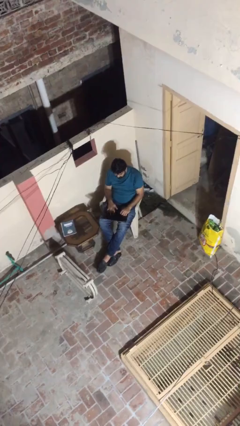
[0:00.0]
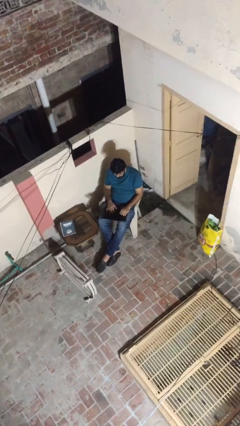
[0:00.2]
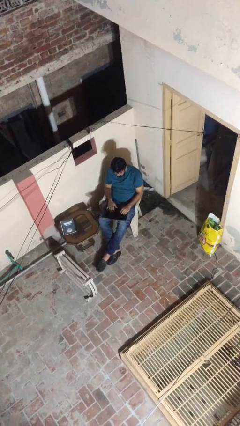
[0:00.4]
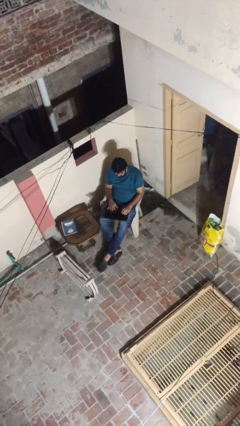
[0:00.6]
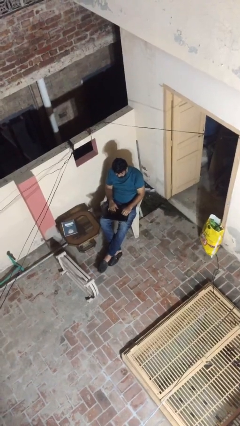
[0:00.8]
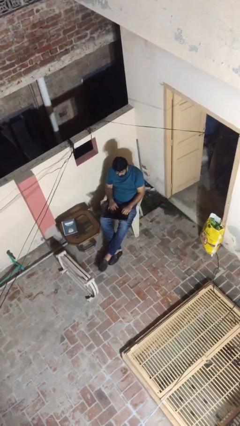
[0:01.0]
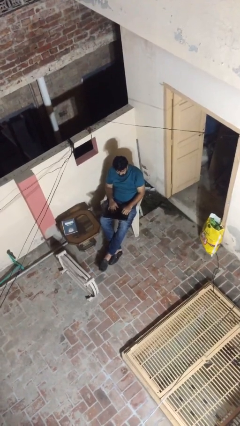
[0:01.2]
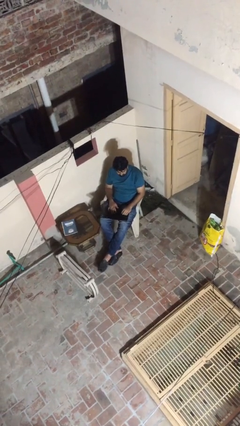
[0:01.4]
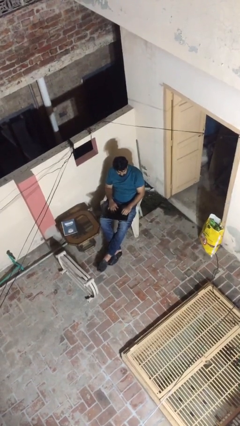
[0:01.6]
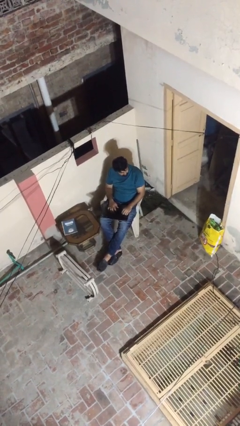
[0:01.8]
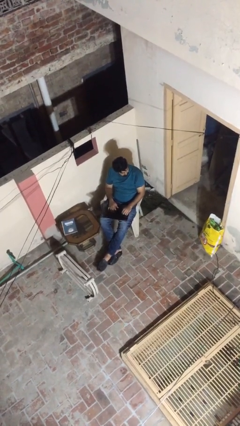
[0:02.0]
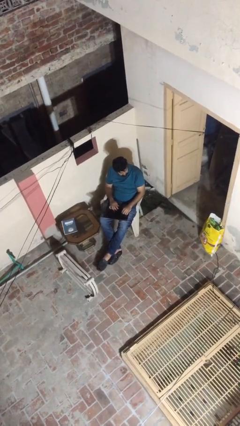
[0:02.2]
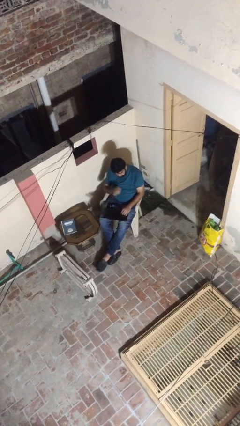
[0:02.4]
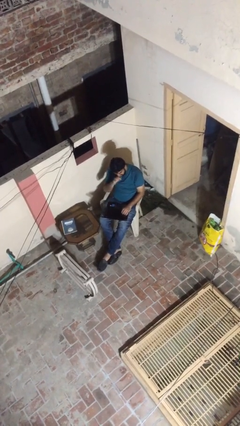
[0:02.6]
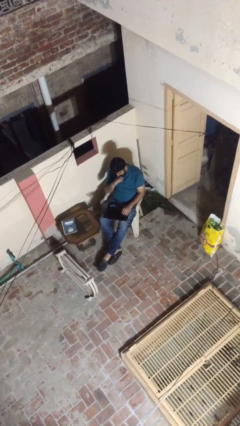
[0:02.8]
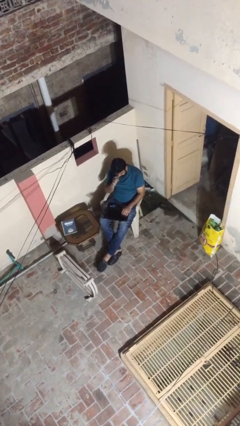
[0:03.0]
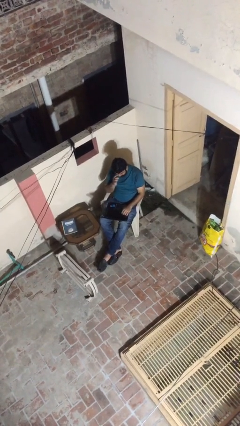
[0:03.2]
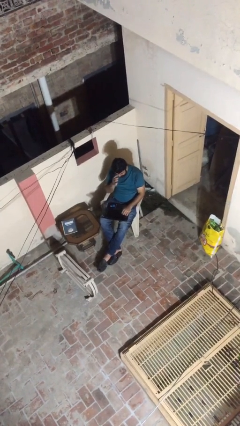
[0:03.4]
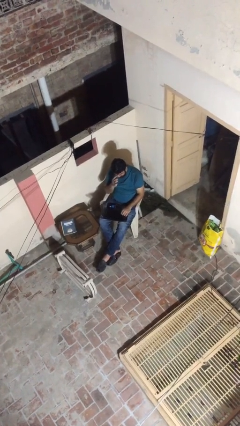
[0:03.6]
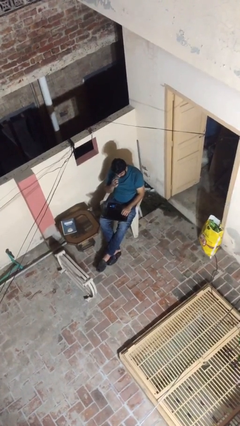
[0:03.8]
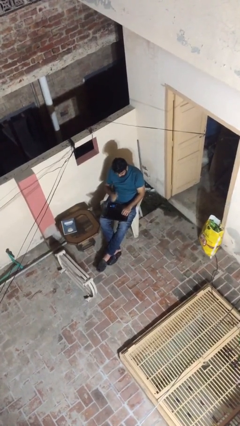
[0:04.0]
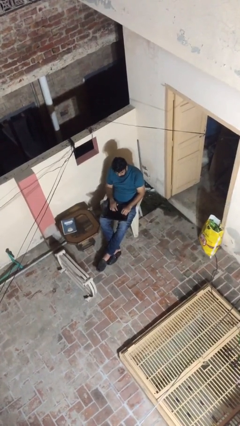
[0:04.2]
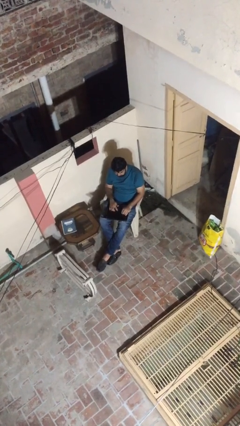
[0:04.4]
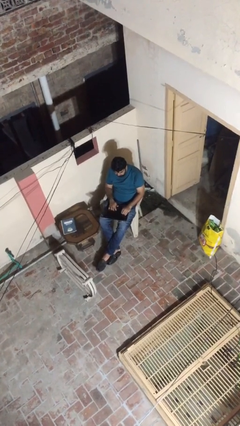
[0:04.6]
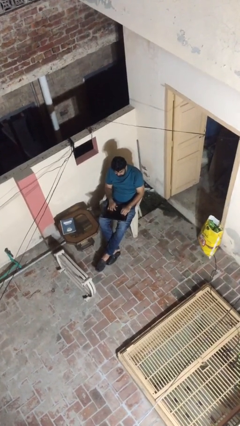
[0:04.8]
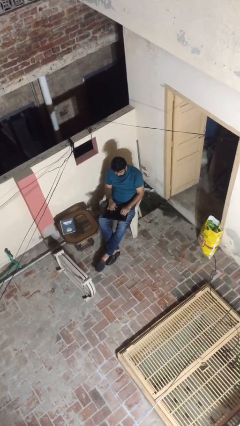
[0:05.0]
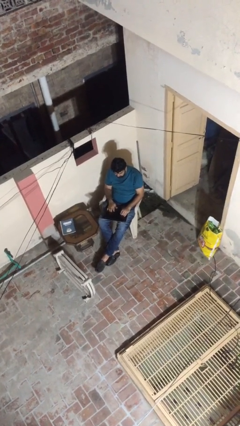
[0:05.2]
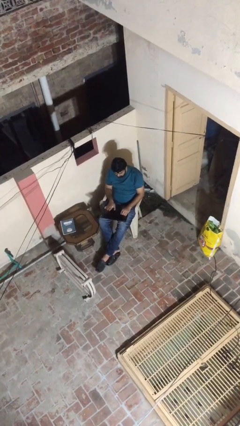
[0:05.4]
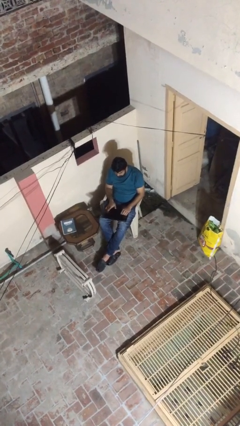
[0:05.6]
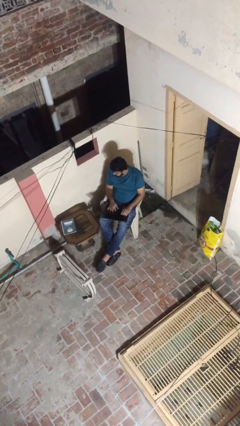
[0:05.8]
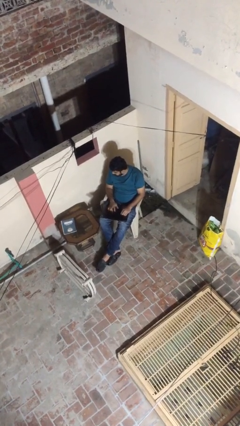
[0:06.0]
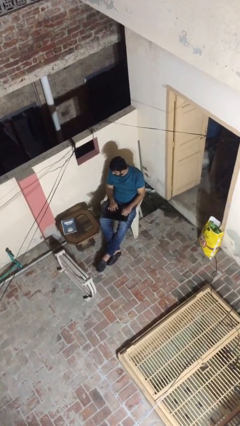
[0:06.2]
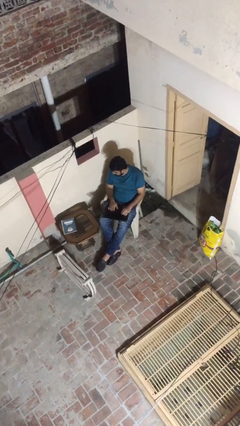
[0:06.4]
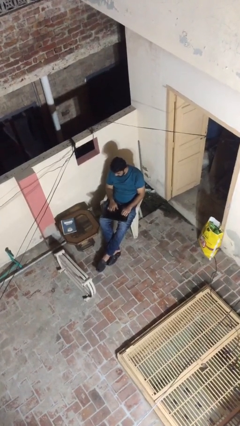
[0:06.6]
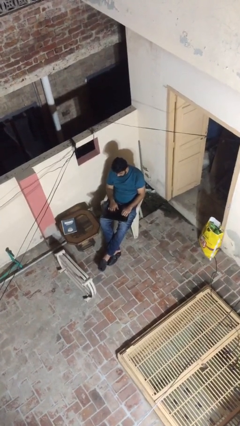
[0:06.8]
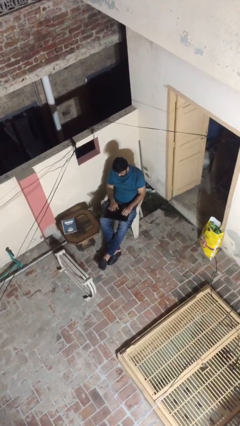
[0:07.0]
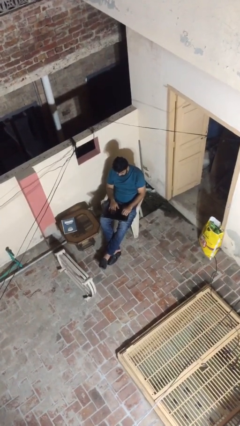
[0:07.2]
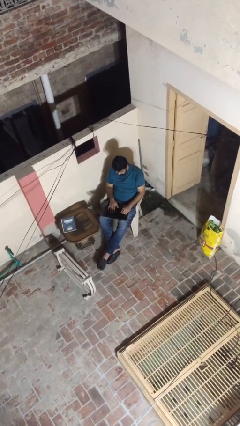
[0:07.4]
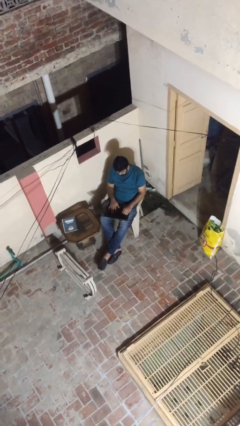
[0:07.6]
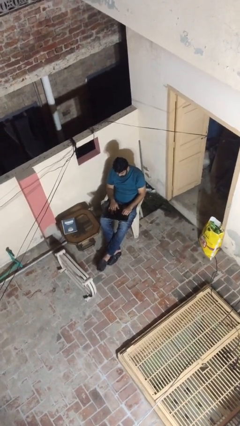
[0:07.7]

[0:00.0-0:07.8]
person interacts with laptop

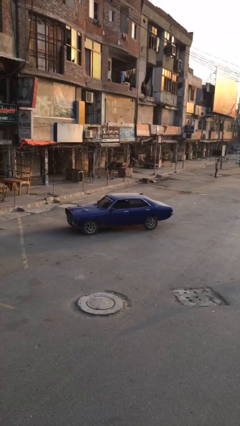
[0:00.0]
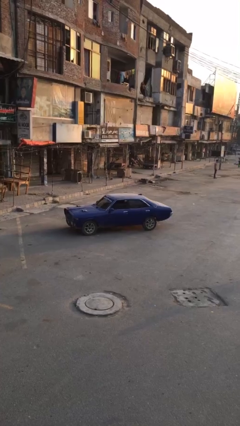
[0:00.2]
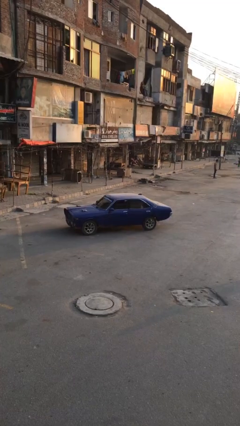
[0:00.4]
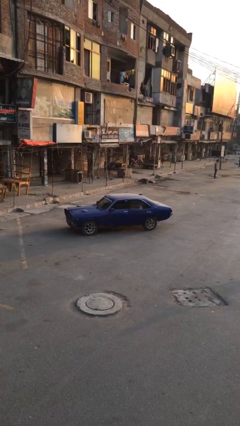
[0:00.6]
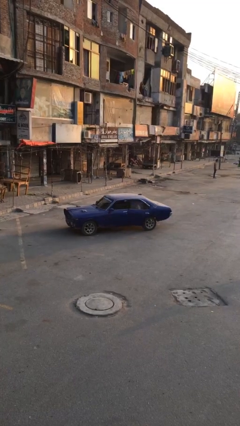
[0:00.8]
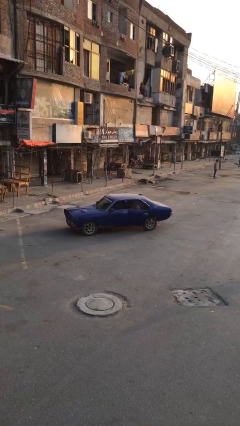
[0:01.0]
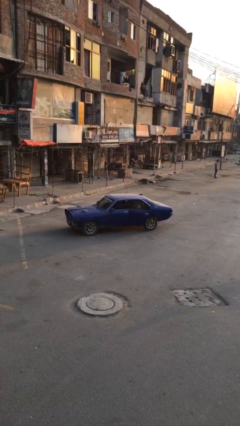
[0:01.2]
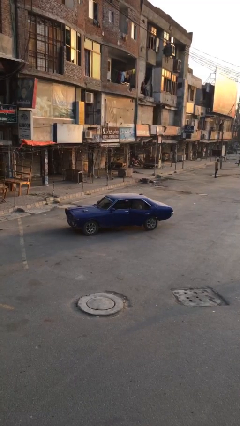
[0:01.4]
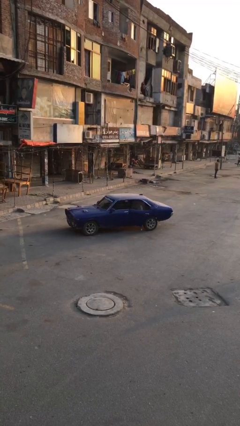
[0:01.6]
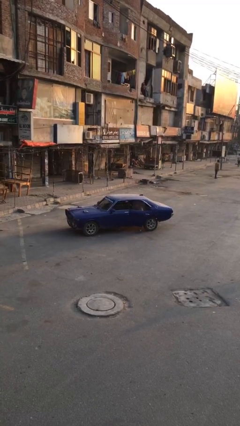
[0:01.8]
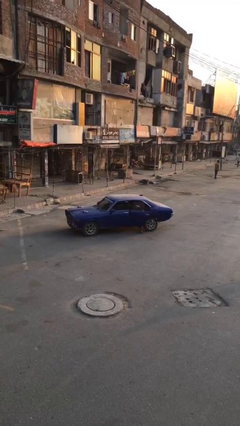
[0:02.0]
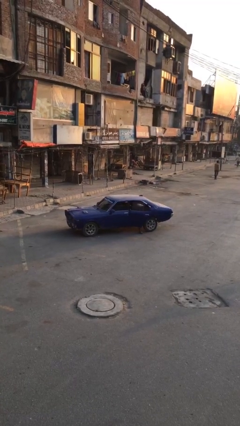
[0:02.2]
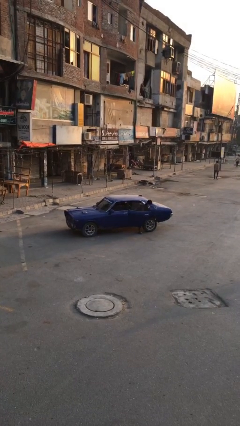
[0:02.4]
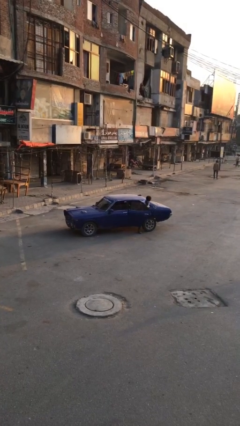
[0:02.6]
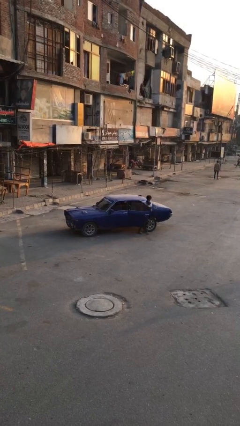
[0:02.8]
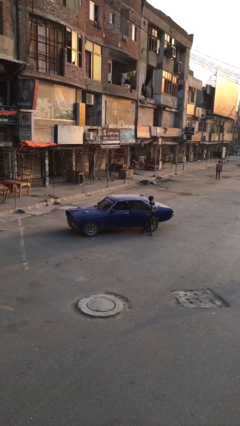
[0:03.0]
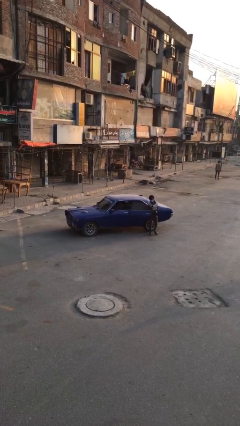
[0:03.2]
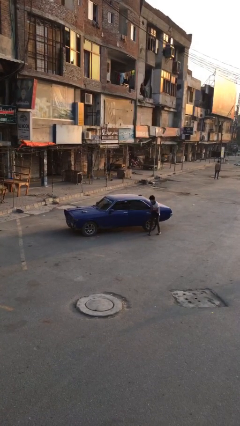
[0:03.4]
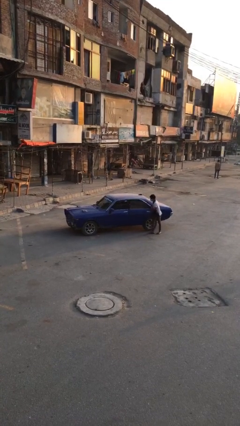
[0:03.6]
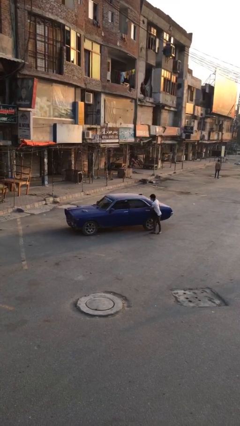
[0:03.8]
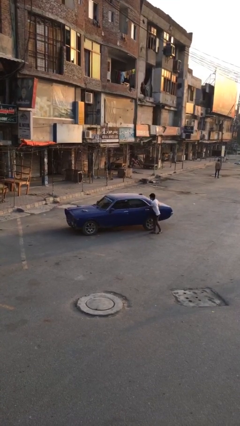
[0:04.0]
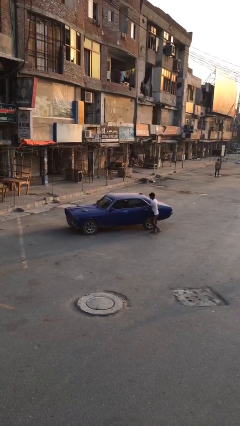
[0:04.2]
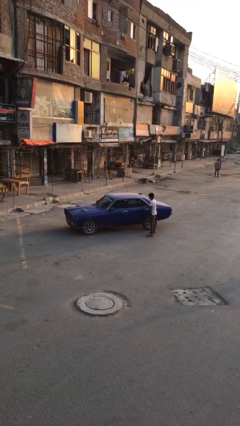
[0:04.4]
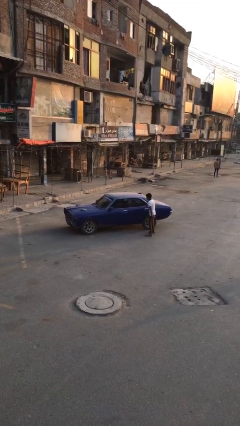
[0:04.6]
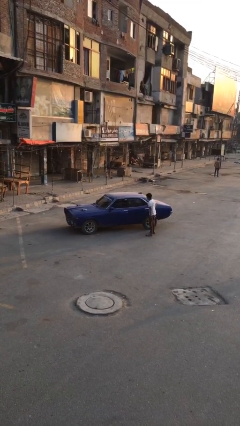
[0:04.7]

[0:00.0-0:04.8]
car drops off person

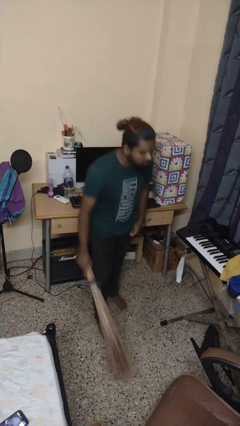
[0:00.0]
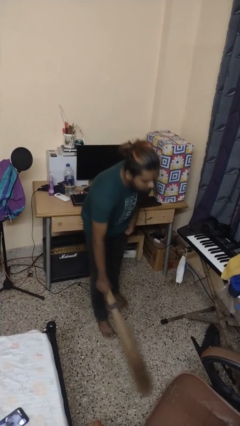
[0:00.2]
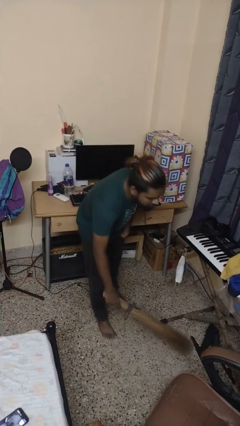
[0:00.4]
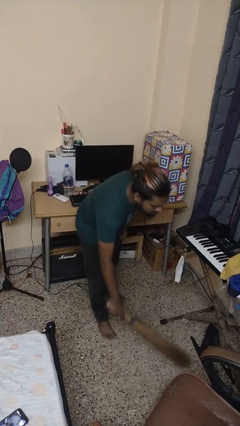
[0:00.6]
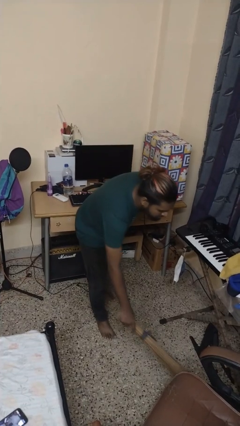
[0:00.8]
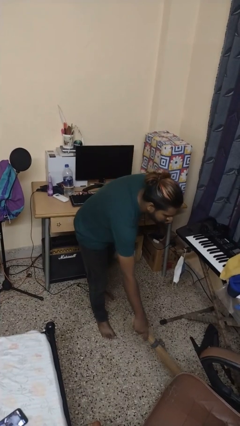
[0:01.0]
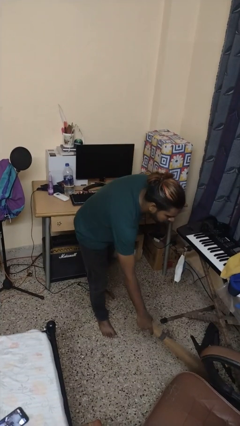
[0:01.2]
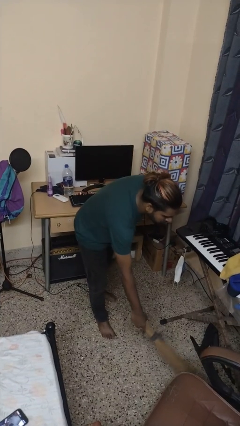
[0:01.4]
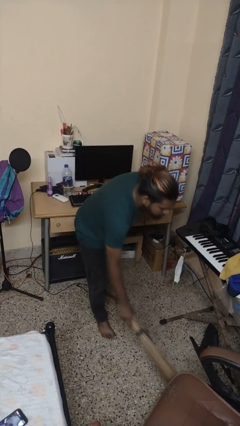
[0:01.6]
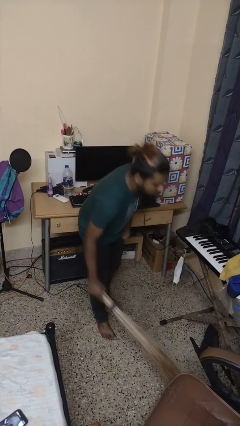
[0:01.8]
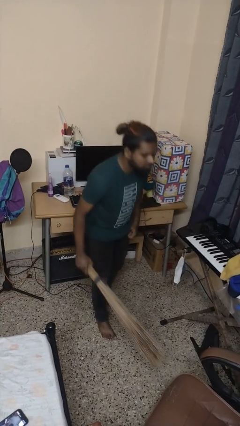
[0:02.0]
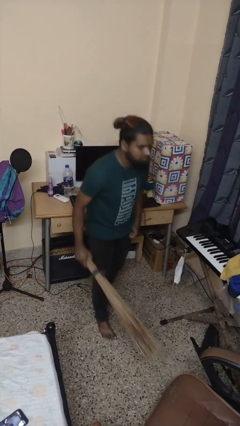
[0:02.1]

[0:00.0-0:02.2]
person sweeps floor

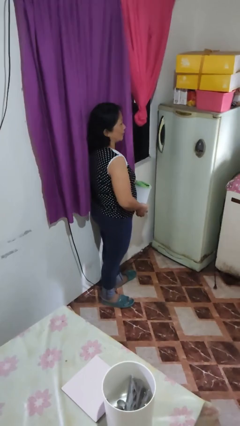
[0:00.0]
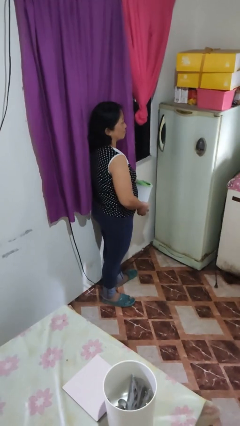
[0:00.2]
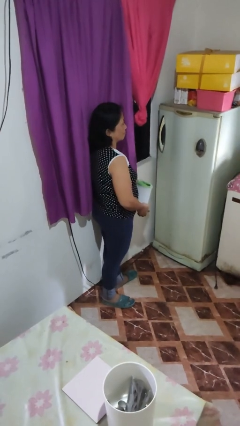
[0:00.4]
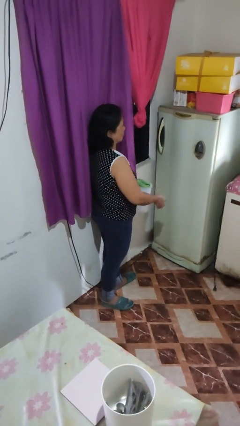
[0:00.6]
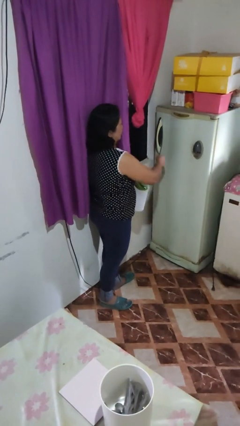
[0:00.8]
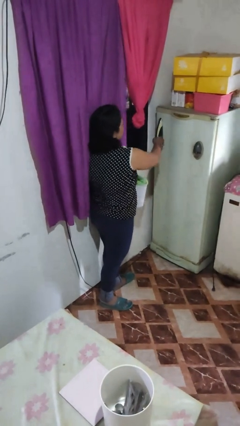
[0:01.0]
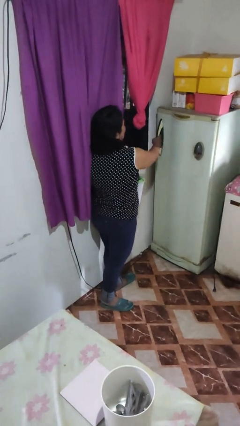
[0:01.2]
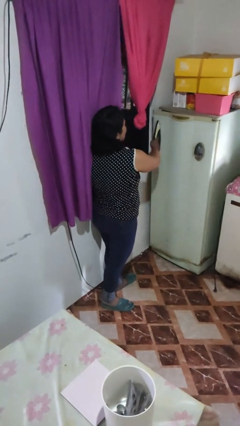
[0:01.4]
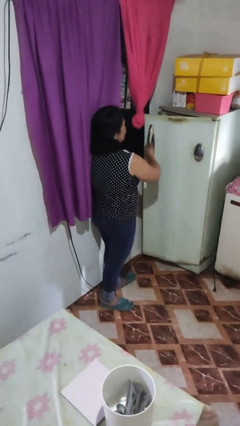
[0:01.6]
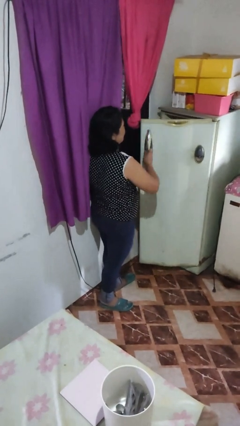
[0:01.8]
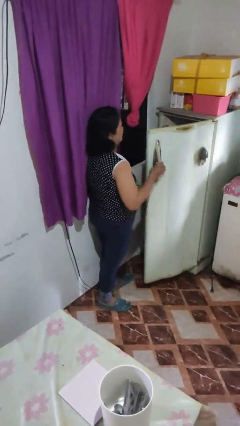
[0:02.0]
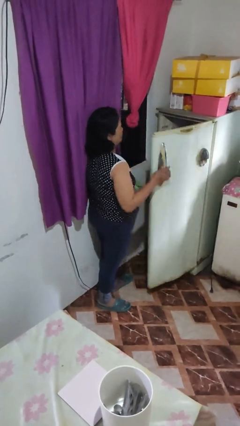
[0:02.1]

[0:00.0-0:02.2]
person opens refrigerator

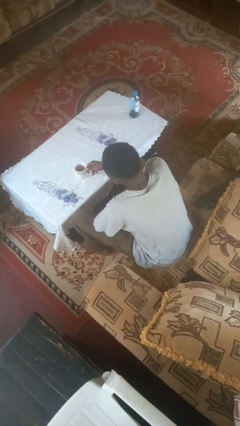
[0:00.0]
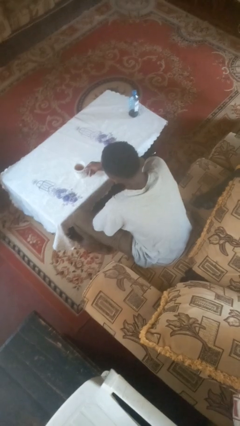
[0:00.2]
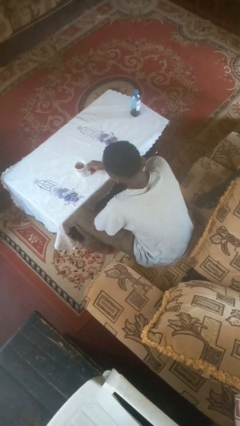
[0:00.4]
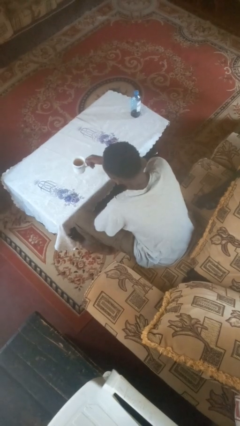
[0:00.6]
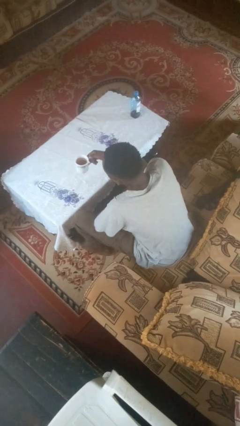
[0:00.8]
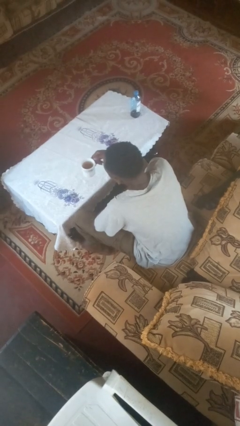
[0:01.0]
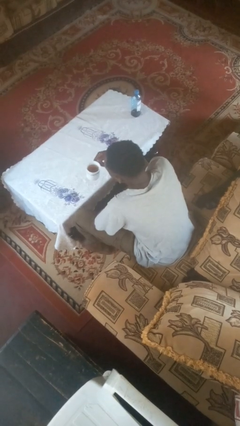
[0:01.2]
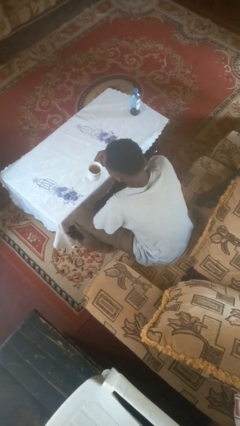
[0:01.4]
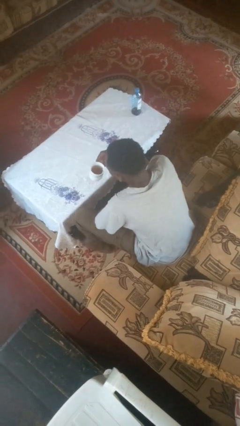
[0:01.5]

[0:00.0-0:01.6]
person picks up object from table
